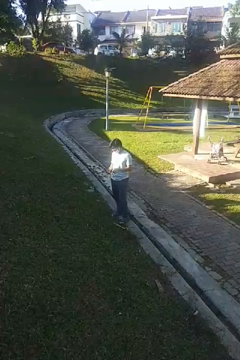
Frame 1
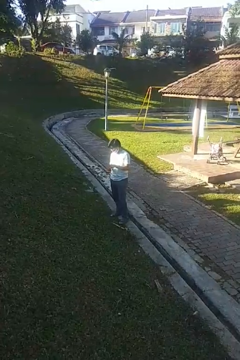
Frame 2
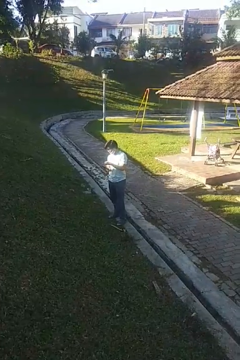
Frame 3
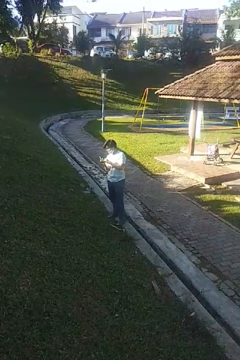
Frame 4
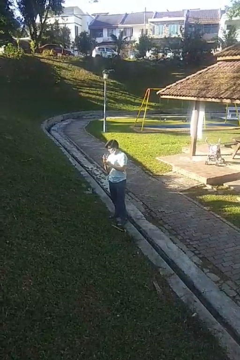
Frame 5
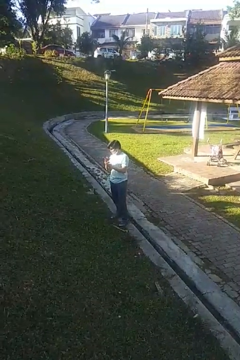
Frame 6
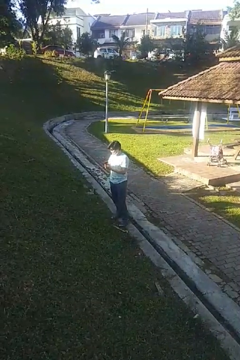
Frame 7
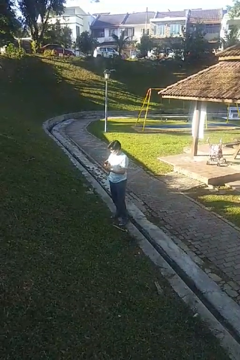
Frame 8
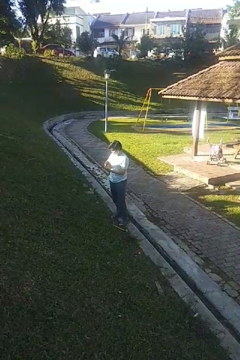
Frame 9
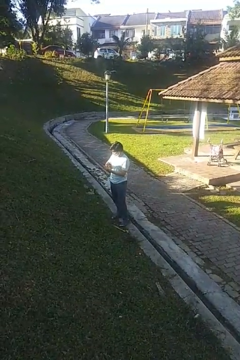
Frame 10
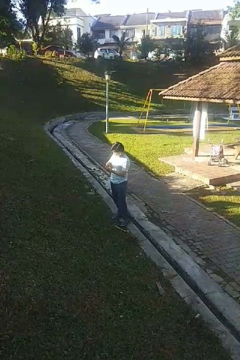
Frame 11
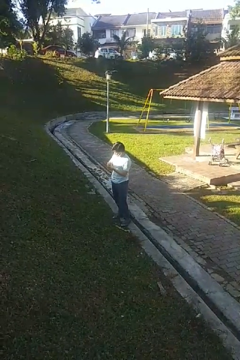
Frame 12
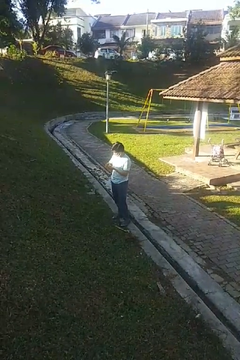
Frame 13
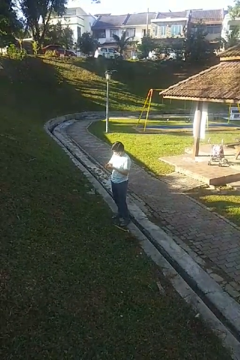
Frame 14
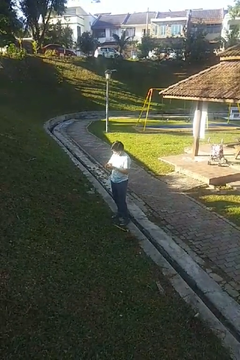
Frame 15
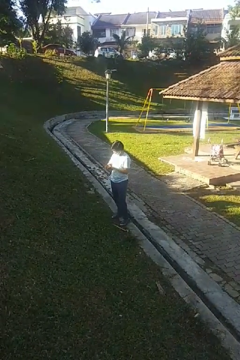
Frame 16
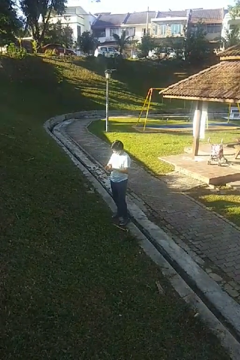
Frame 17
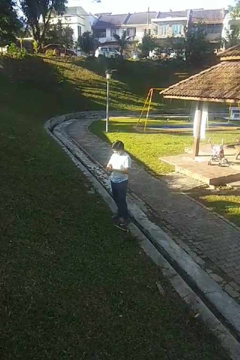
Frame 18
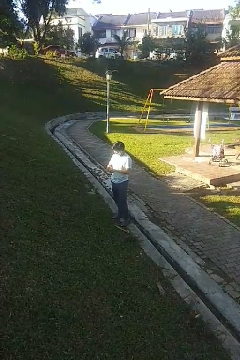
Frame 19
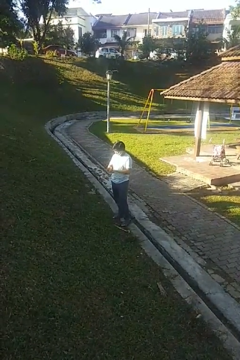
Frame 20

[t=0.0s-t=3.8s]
person puts on wristwatch

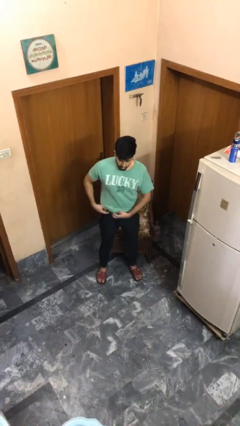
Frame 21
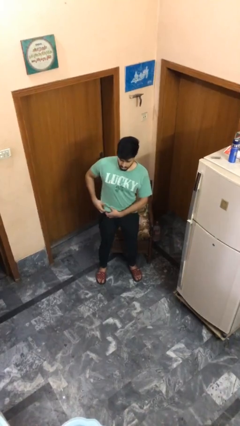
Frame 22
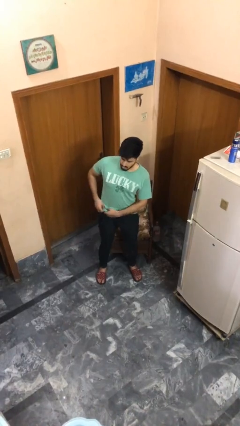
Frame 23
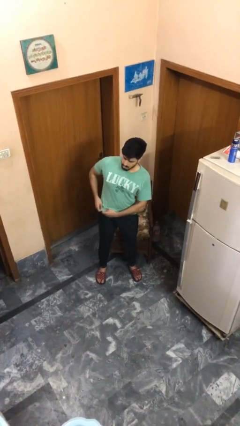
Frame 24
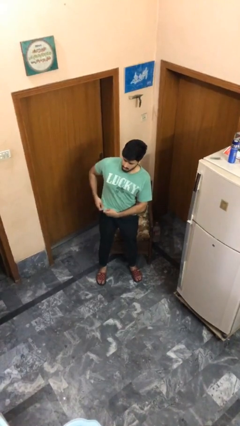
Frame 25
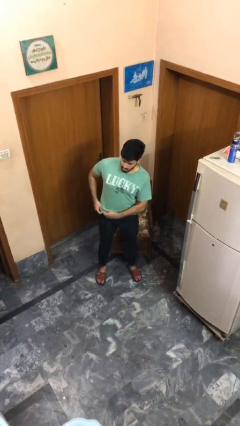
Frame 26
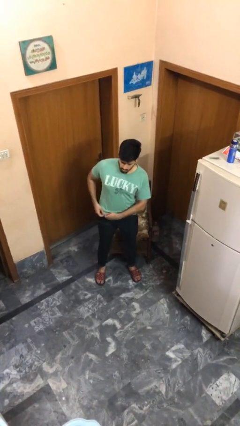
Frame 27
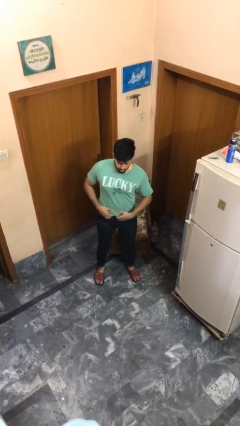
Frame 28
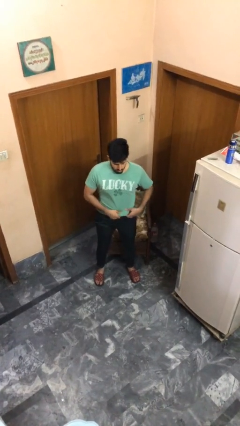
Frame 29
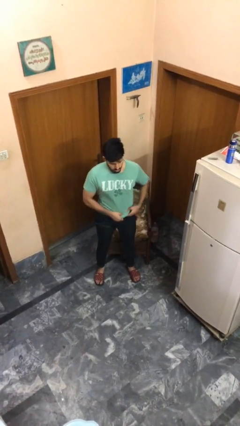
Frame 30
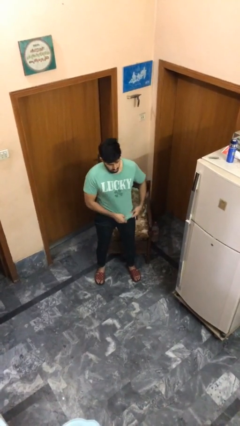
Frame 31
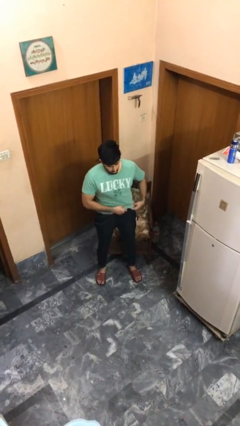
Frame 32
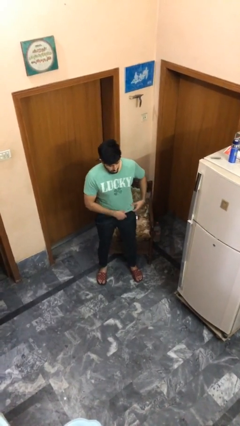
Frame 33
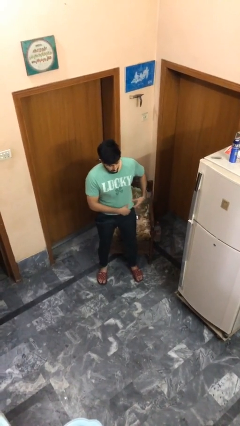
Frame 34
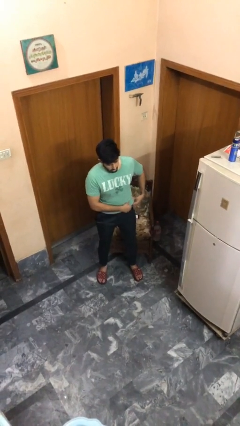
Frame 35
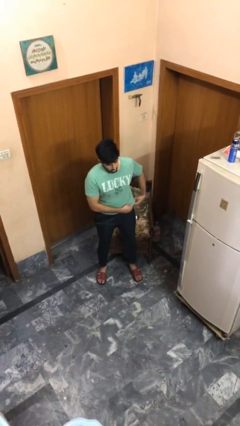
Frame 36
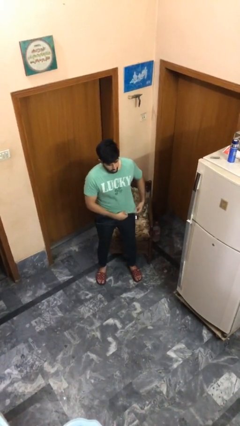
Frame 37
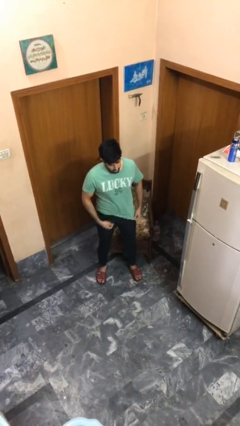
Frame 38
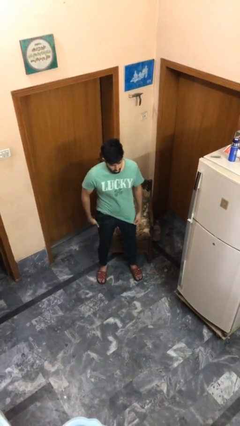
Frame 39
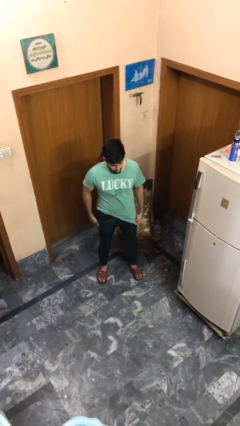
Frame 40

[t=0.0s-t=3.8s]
person hikes up pants

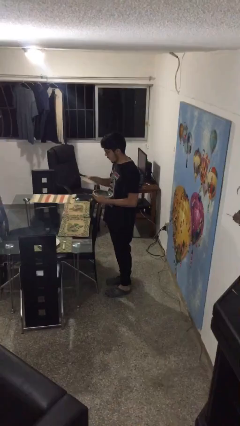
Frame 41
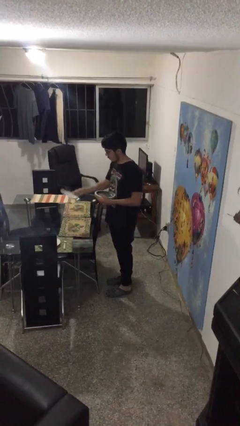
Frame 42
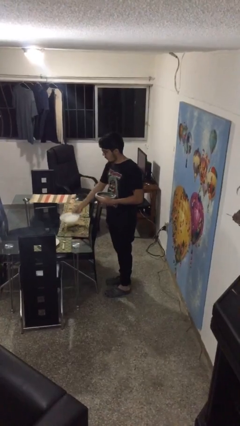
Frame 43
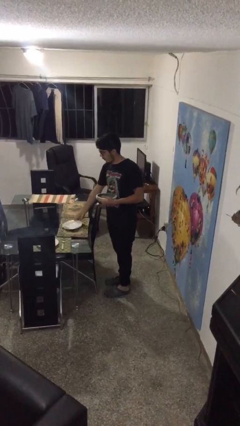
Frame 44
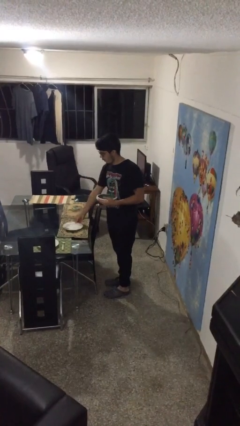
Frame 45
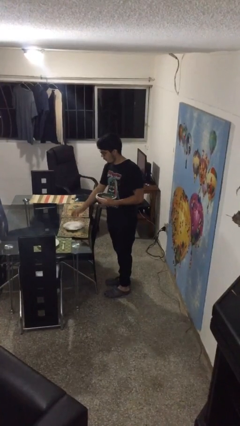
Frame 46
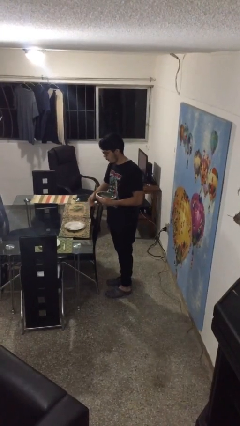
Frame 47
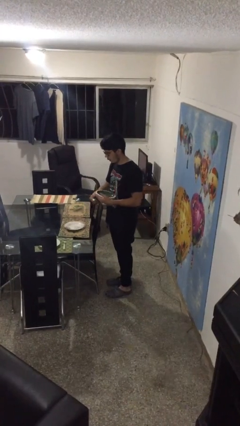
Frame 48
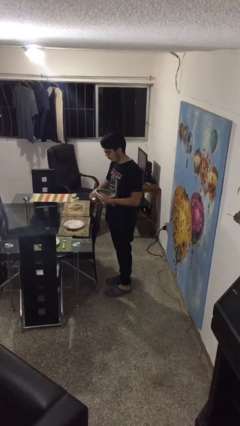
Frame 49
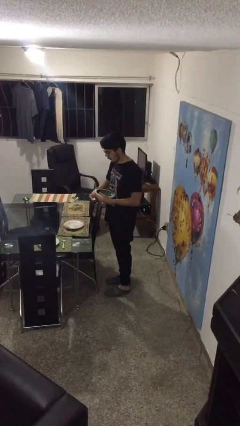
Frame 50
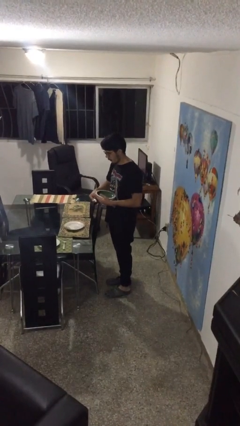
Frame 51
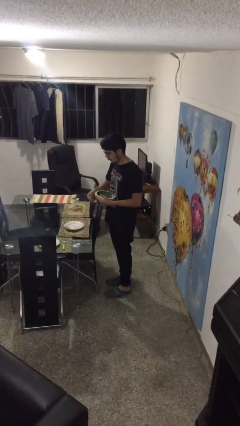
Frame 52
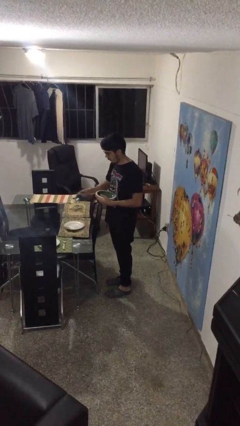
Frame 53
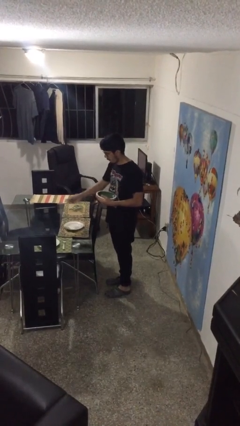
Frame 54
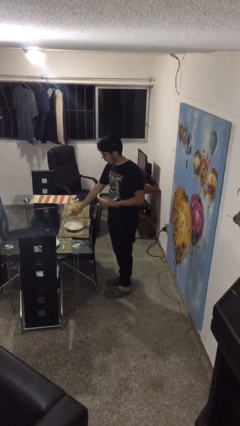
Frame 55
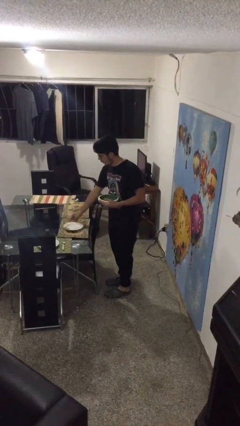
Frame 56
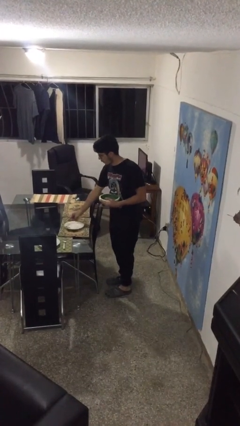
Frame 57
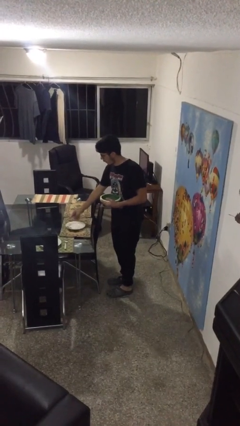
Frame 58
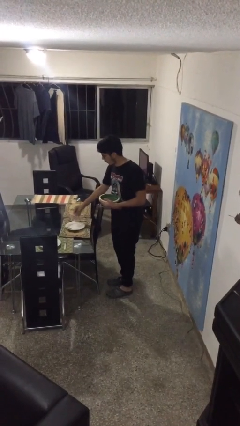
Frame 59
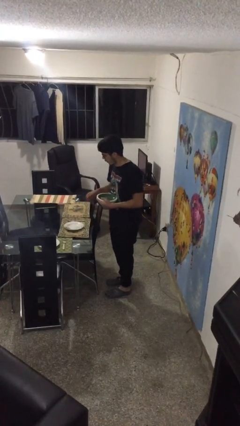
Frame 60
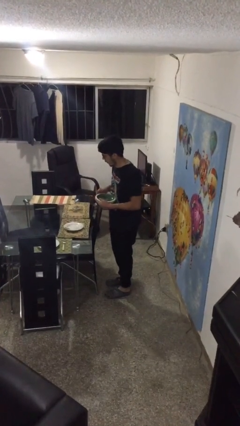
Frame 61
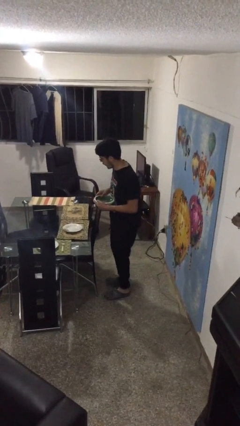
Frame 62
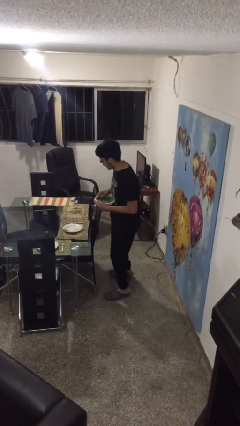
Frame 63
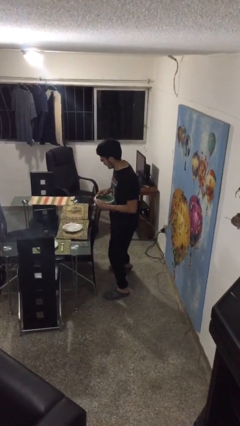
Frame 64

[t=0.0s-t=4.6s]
person sets table

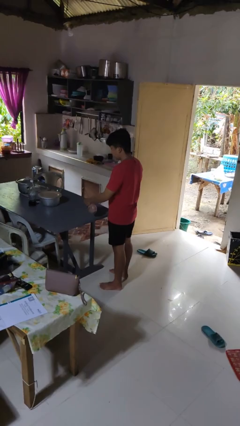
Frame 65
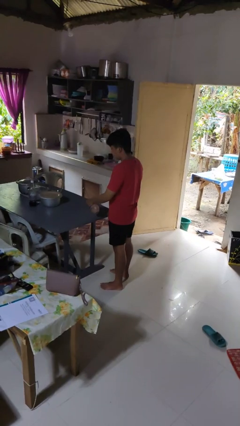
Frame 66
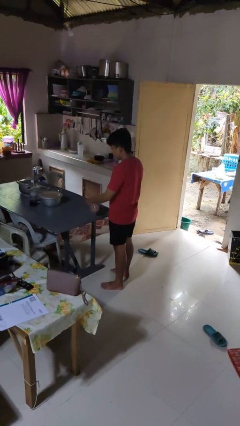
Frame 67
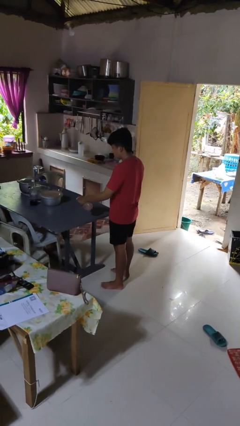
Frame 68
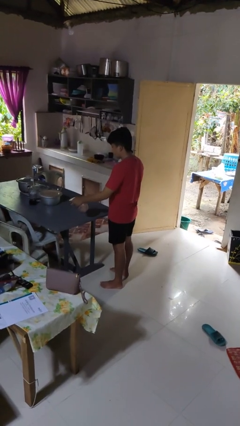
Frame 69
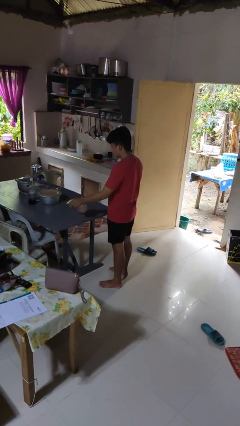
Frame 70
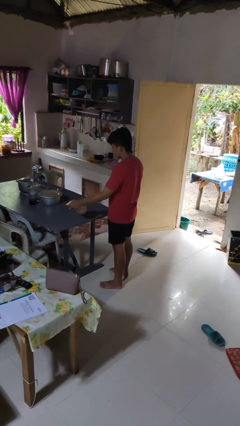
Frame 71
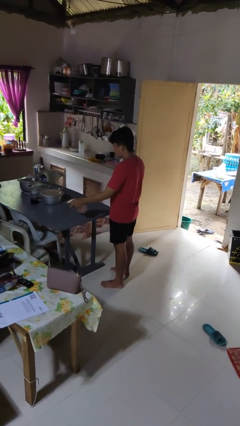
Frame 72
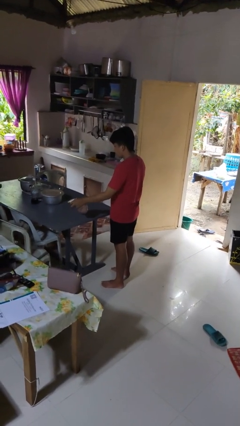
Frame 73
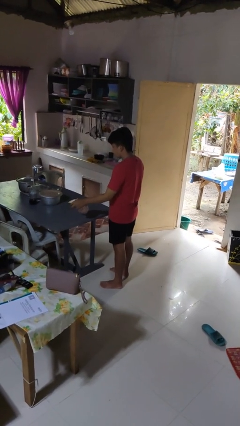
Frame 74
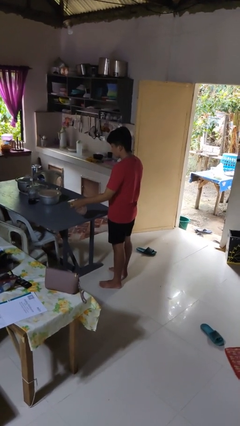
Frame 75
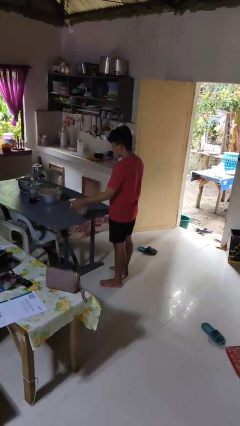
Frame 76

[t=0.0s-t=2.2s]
person sprays from bottle

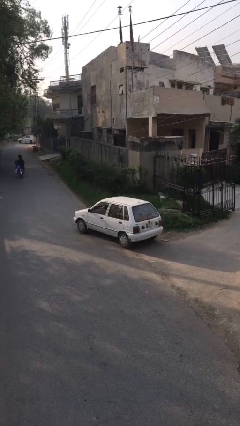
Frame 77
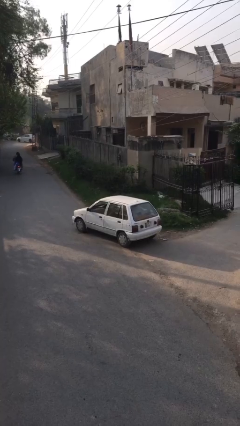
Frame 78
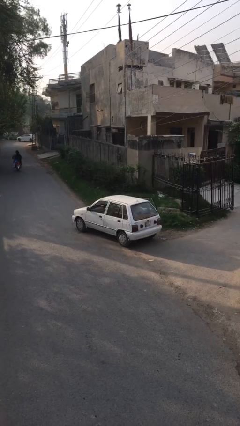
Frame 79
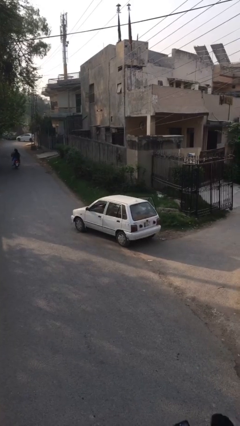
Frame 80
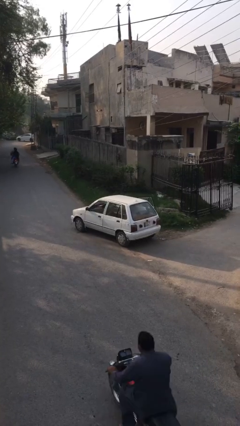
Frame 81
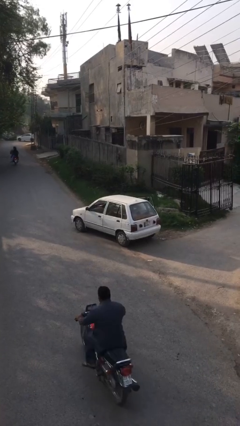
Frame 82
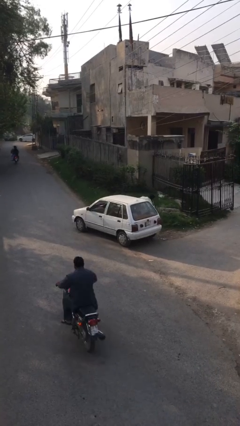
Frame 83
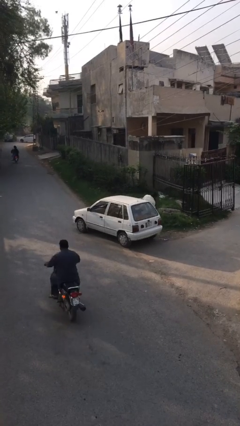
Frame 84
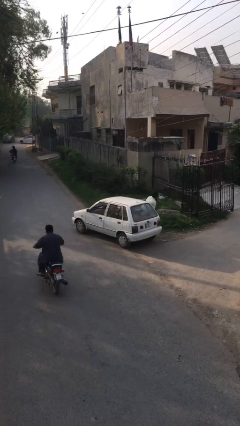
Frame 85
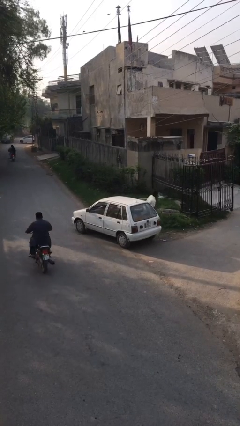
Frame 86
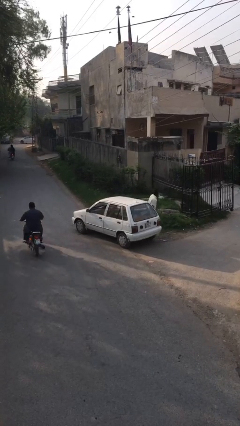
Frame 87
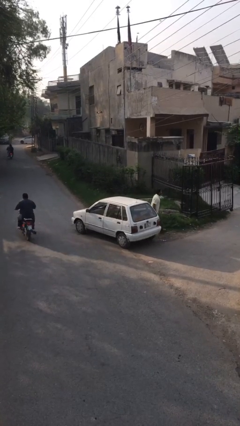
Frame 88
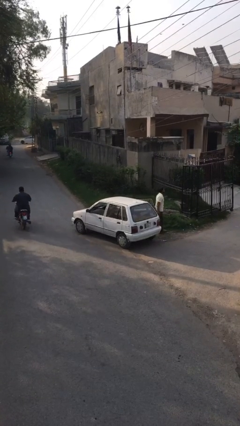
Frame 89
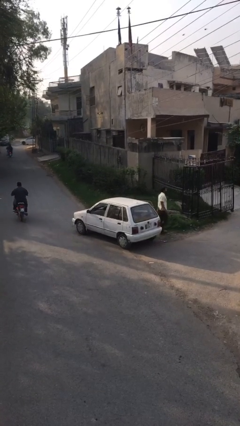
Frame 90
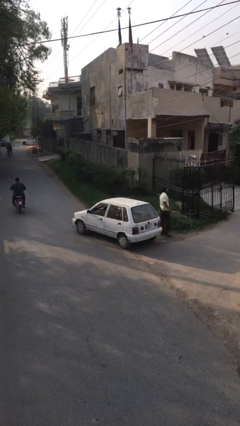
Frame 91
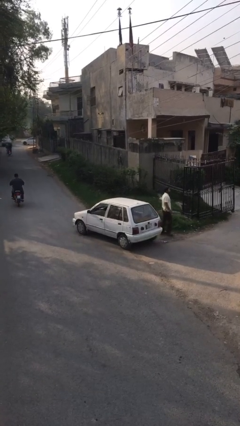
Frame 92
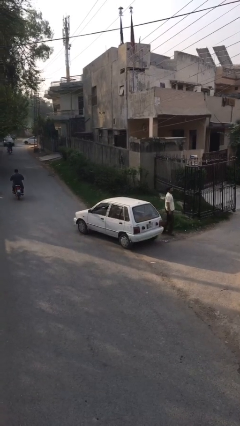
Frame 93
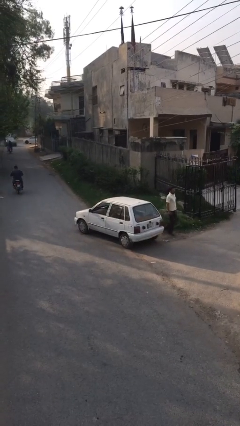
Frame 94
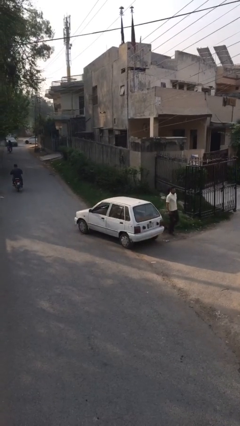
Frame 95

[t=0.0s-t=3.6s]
car drops off person

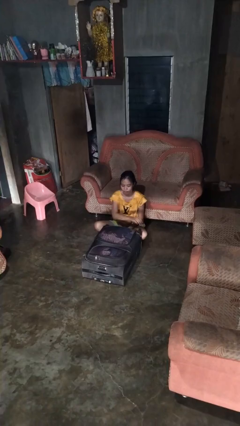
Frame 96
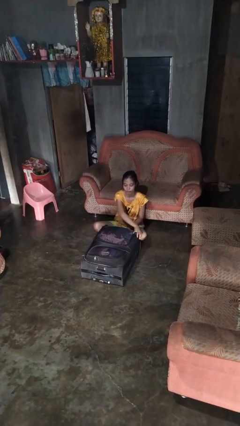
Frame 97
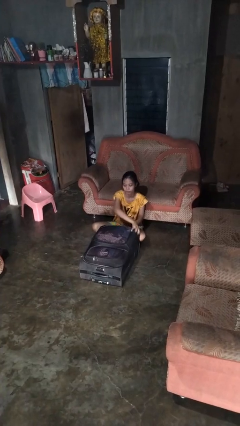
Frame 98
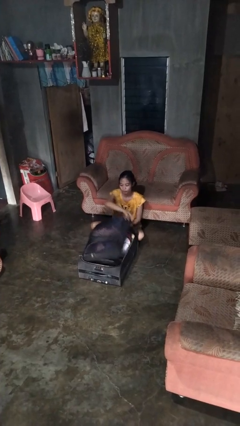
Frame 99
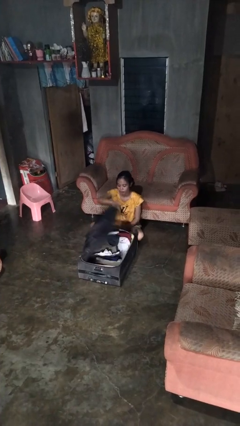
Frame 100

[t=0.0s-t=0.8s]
person opens suitcase
